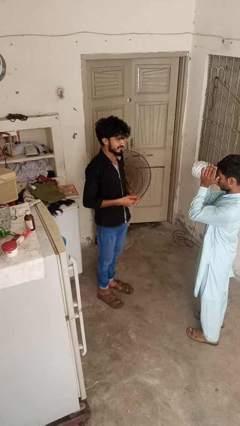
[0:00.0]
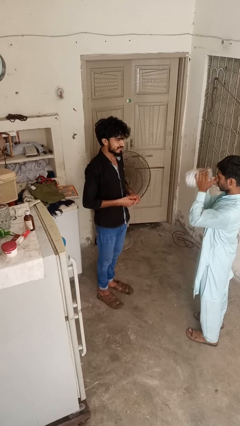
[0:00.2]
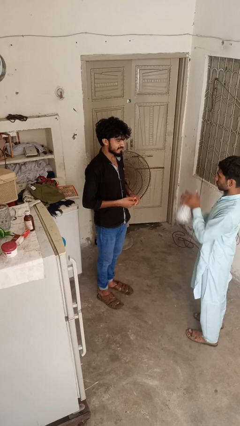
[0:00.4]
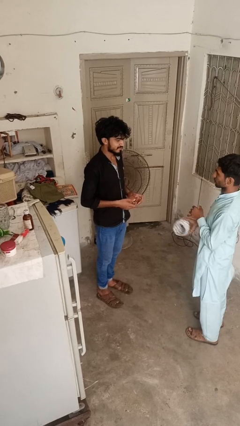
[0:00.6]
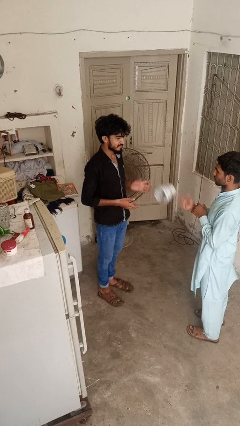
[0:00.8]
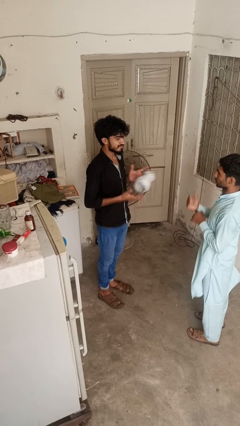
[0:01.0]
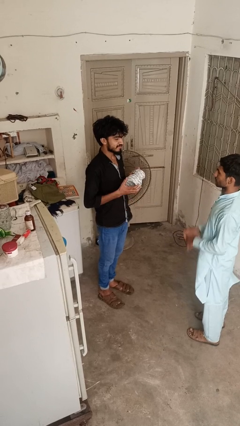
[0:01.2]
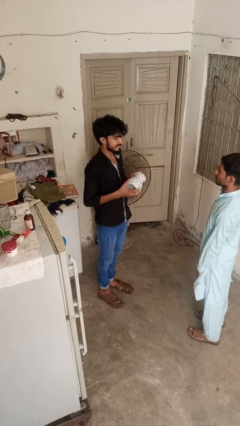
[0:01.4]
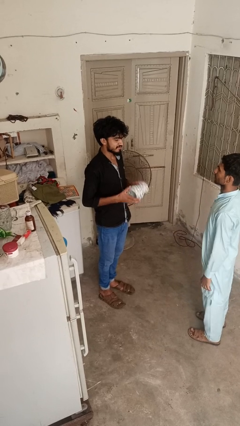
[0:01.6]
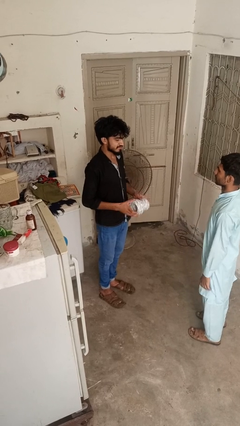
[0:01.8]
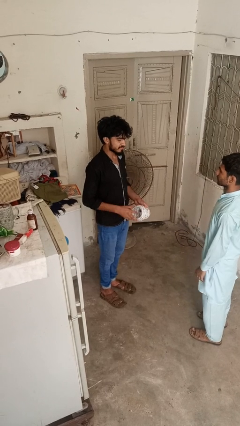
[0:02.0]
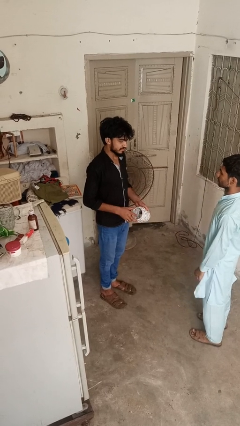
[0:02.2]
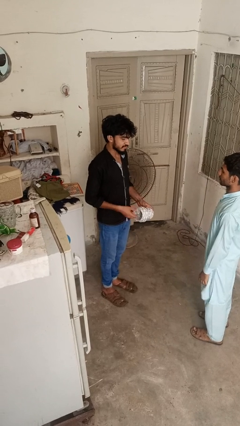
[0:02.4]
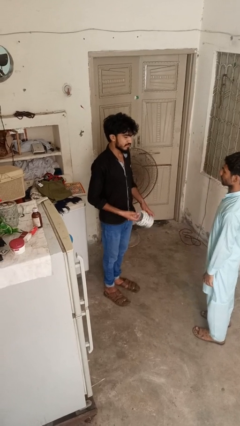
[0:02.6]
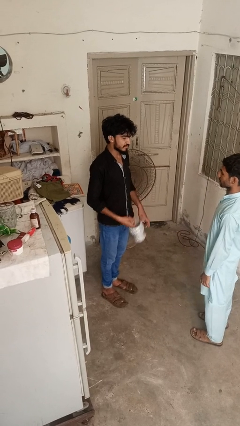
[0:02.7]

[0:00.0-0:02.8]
person catches object from person

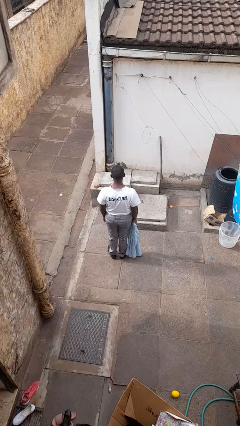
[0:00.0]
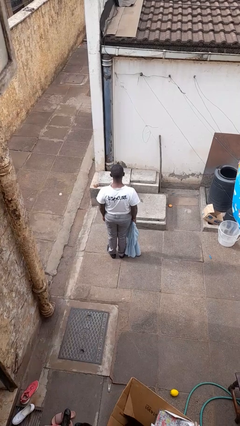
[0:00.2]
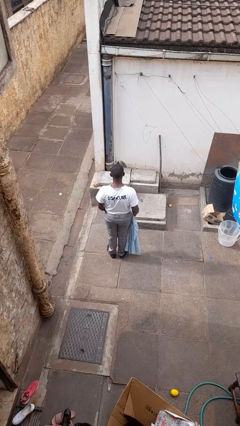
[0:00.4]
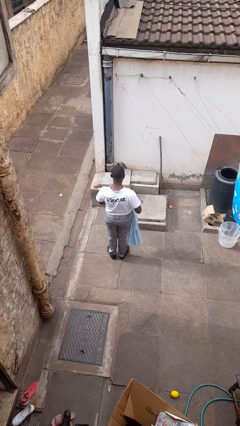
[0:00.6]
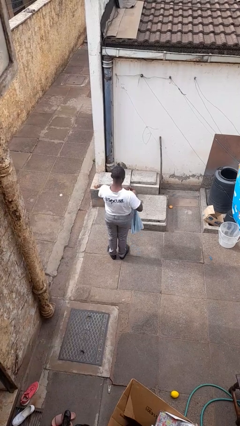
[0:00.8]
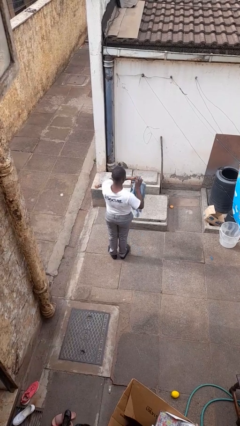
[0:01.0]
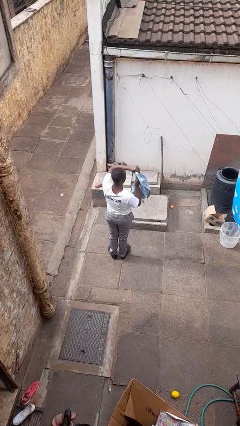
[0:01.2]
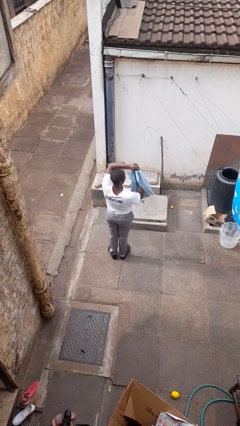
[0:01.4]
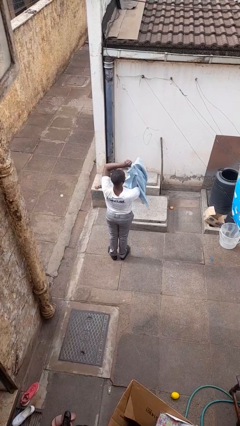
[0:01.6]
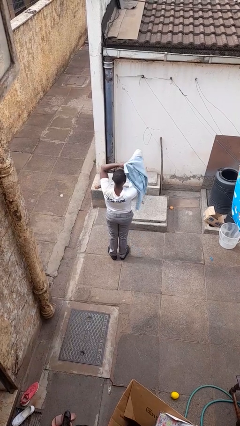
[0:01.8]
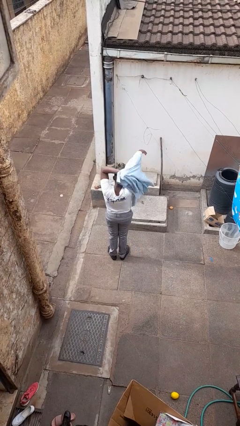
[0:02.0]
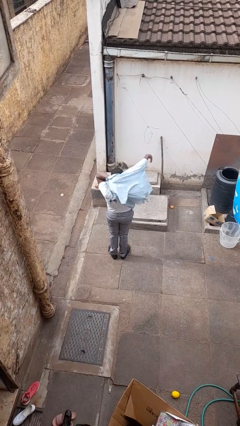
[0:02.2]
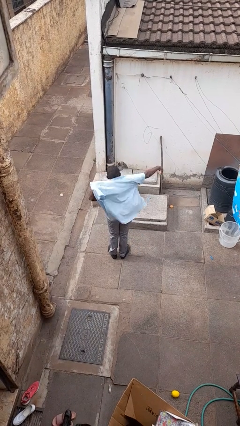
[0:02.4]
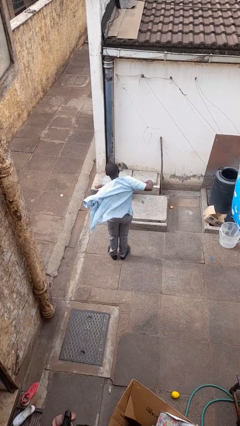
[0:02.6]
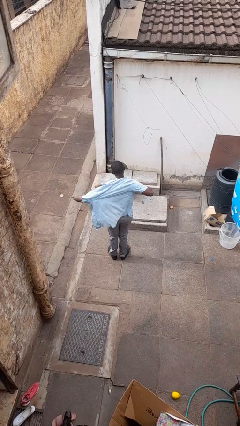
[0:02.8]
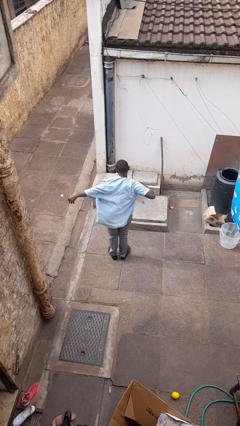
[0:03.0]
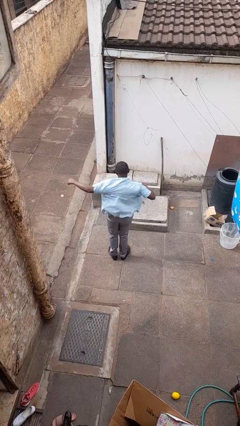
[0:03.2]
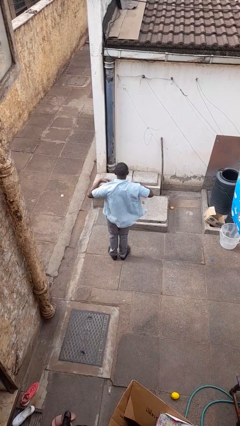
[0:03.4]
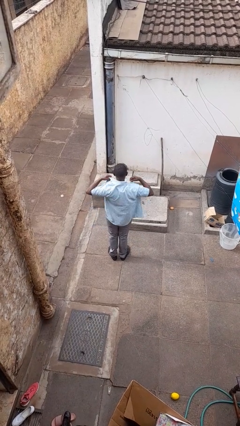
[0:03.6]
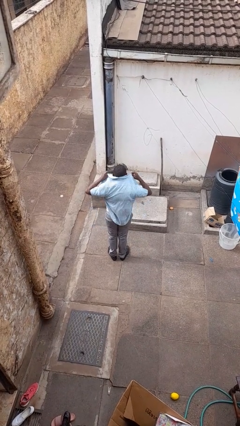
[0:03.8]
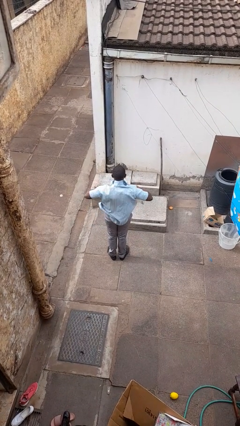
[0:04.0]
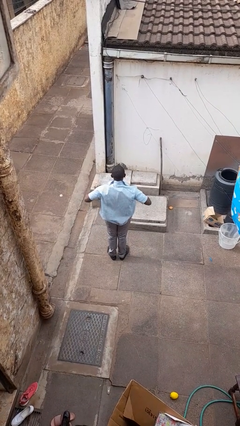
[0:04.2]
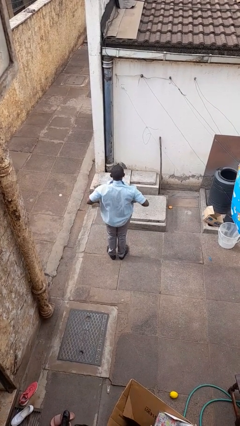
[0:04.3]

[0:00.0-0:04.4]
person puts on shirt

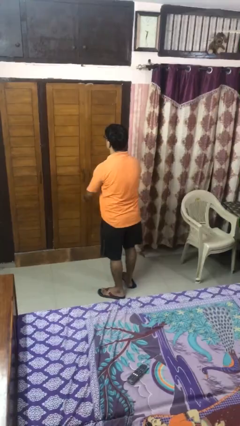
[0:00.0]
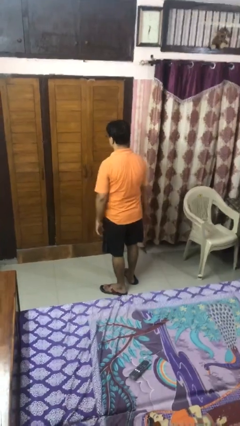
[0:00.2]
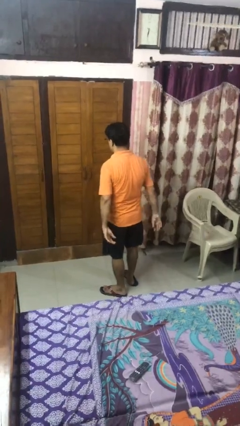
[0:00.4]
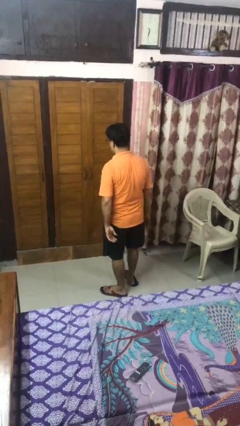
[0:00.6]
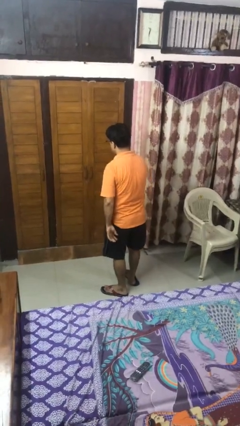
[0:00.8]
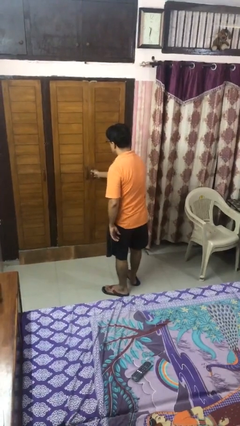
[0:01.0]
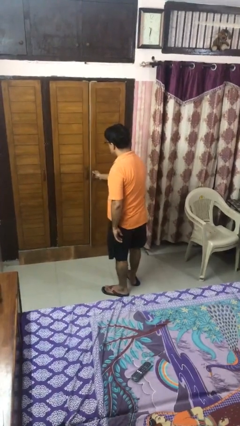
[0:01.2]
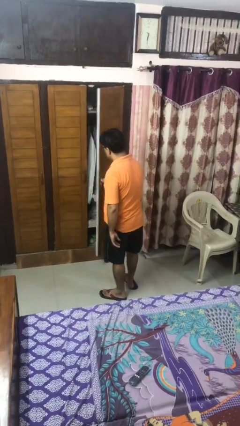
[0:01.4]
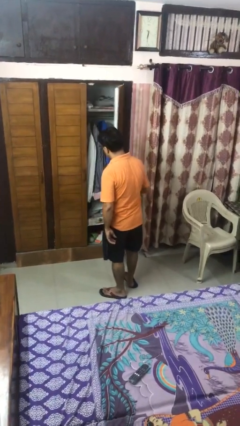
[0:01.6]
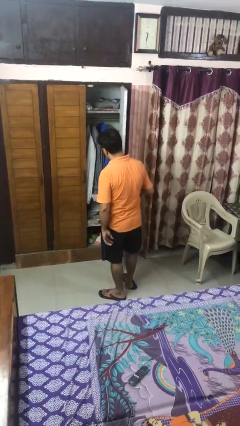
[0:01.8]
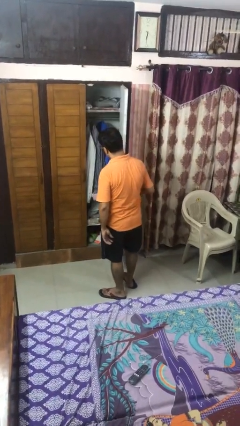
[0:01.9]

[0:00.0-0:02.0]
person opens closet door

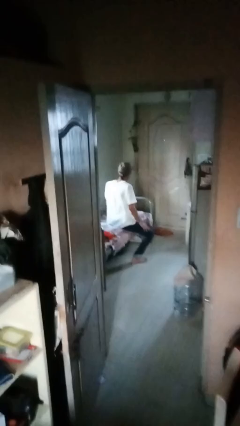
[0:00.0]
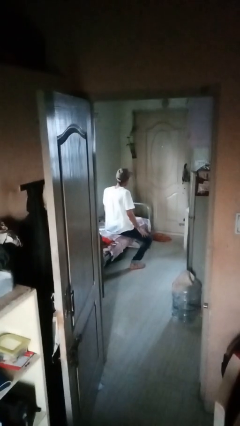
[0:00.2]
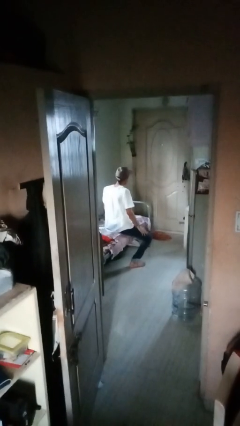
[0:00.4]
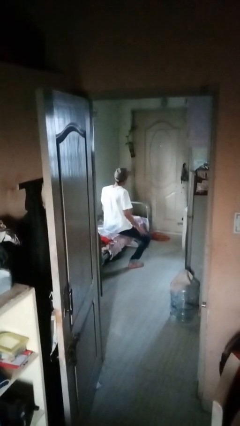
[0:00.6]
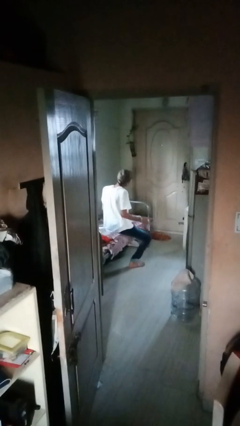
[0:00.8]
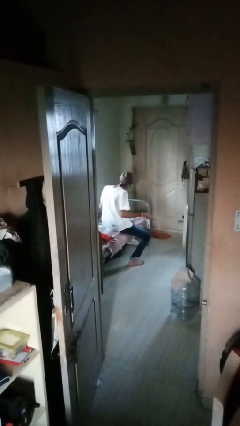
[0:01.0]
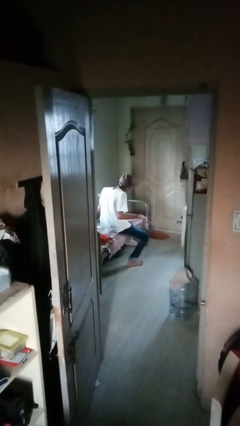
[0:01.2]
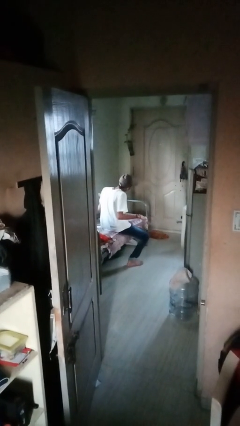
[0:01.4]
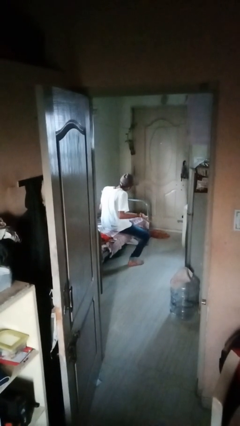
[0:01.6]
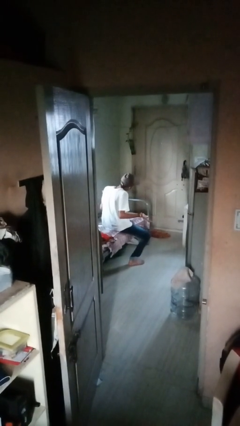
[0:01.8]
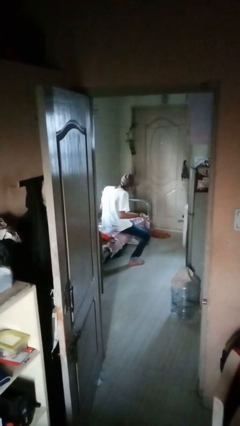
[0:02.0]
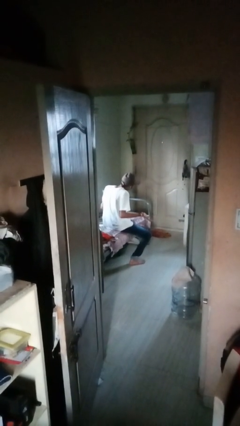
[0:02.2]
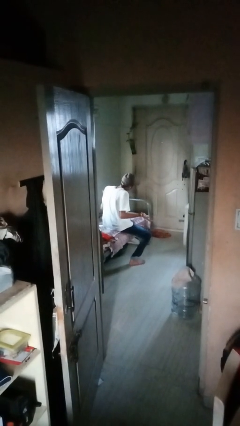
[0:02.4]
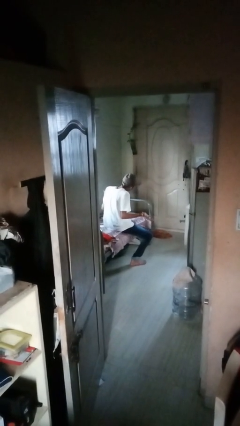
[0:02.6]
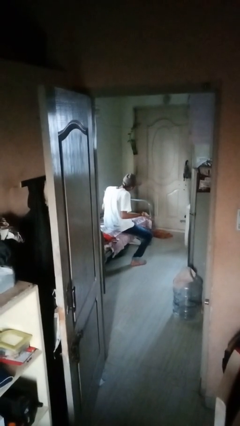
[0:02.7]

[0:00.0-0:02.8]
person shrugs

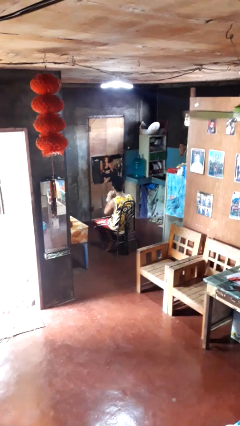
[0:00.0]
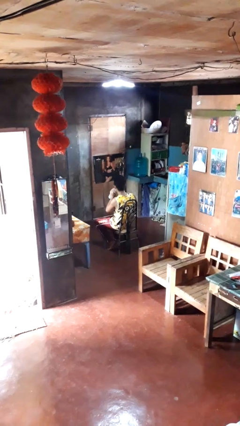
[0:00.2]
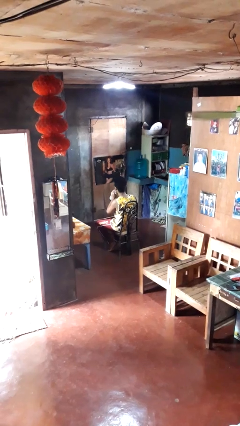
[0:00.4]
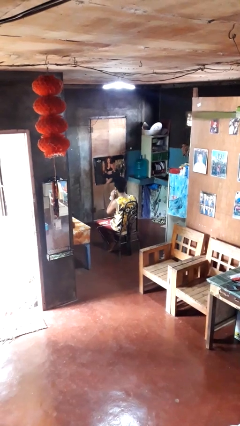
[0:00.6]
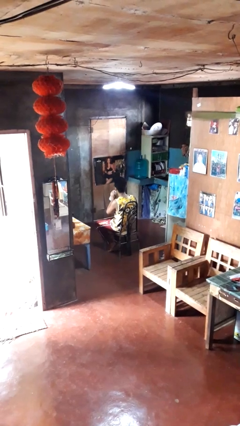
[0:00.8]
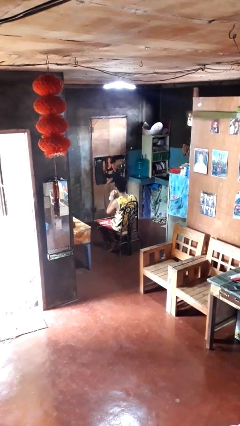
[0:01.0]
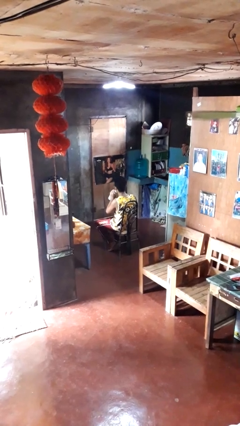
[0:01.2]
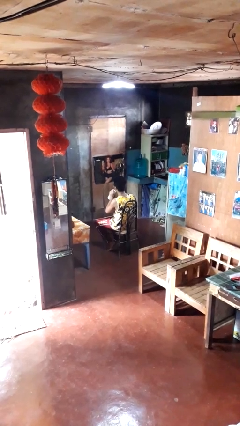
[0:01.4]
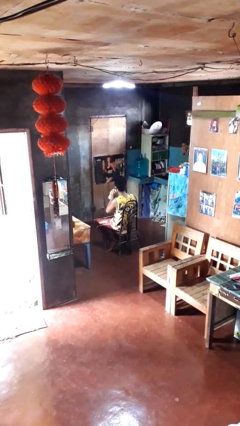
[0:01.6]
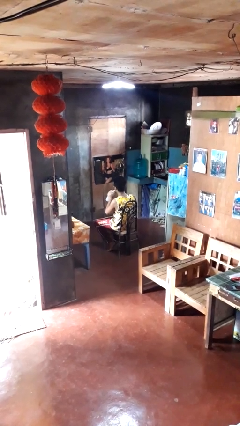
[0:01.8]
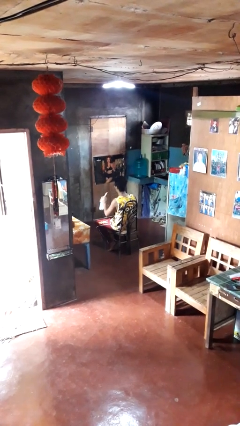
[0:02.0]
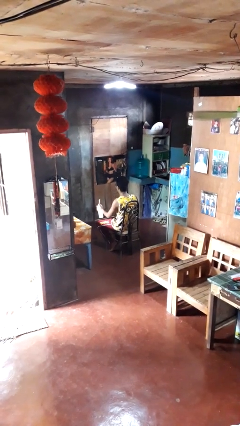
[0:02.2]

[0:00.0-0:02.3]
person drinks from straw

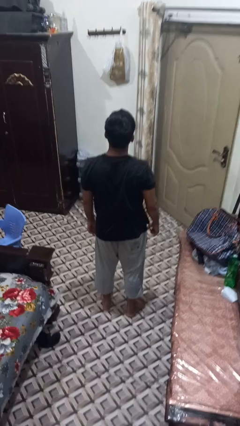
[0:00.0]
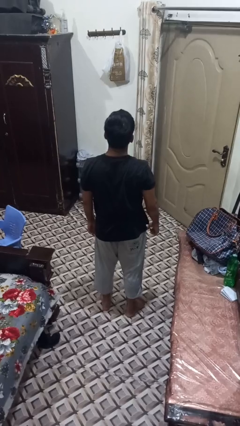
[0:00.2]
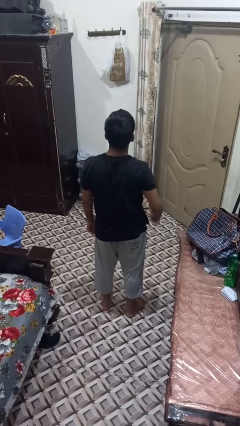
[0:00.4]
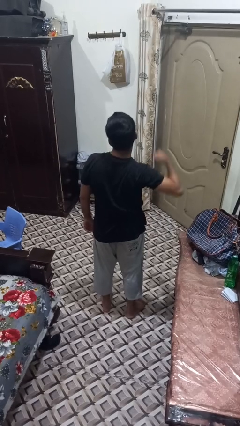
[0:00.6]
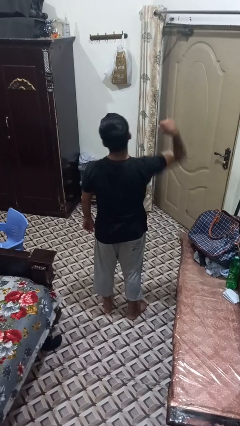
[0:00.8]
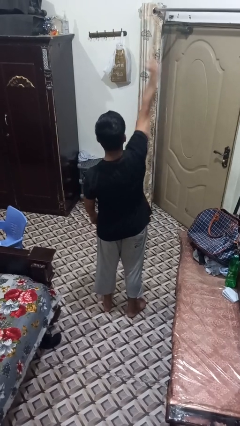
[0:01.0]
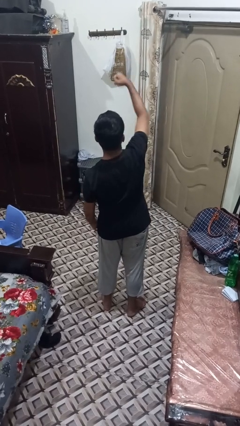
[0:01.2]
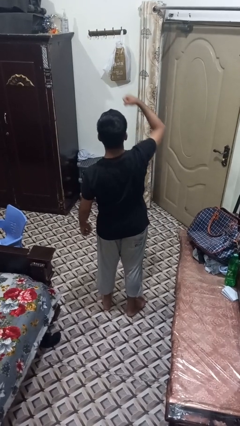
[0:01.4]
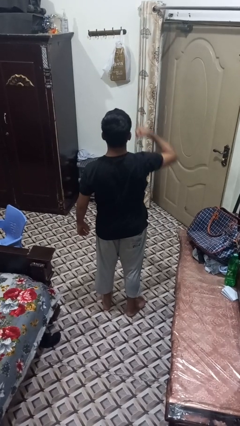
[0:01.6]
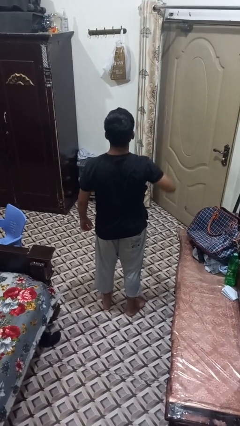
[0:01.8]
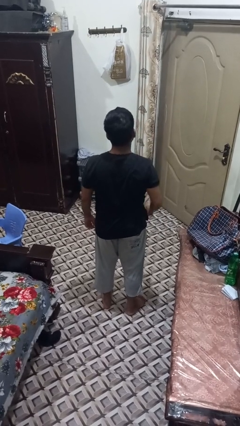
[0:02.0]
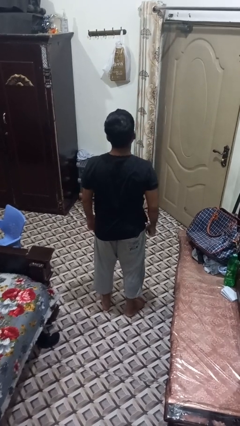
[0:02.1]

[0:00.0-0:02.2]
person punches

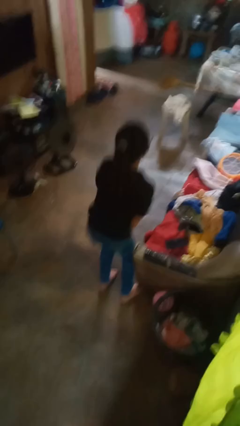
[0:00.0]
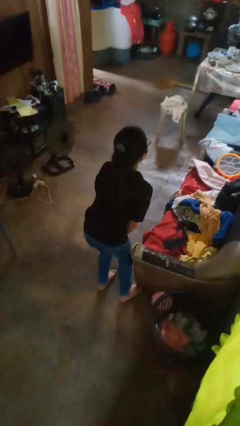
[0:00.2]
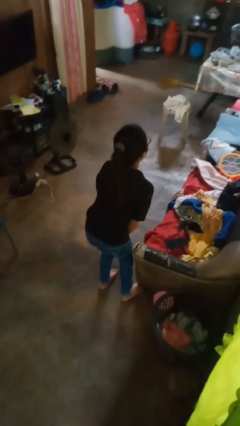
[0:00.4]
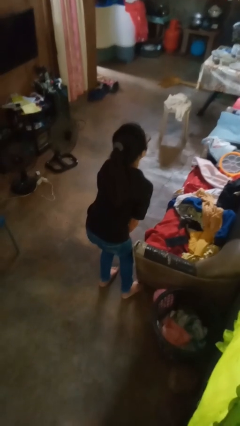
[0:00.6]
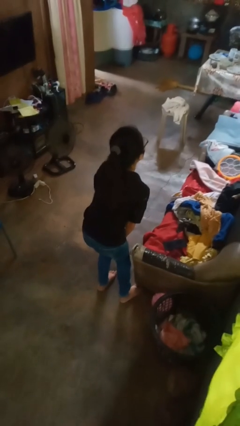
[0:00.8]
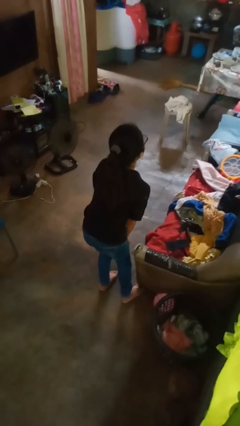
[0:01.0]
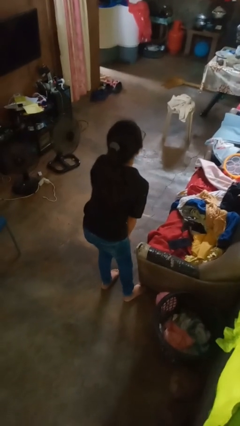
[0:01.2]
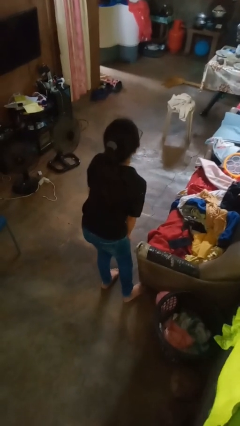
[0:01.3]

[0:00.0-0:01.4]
person stubs toe
